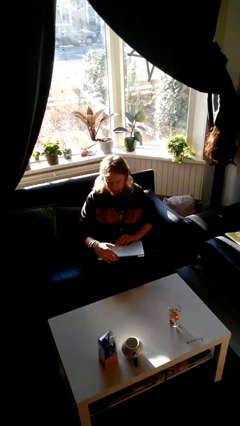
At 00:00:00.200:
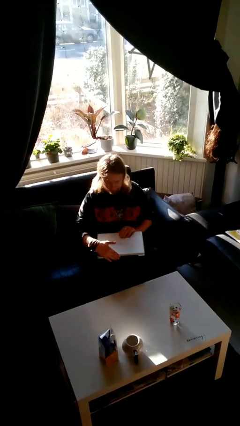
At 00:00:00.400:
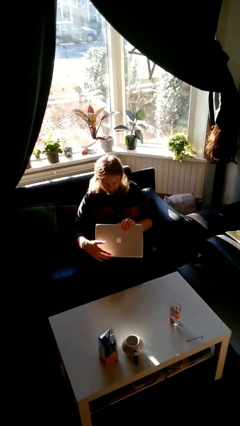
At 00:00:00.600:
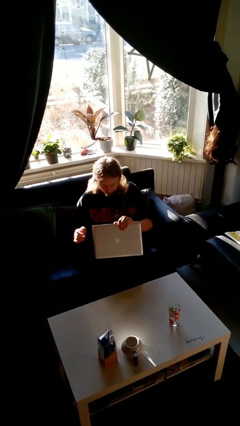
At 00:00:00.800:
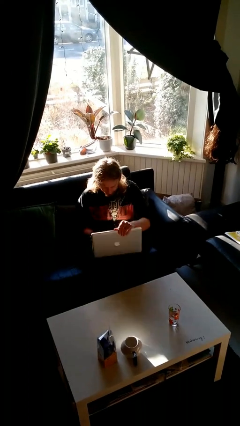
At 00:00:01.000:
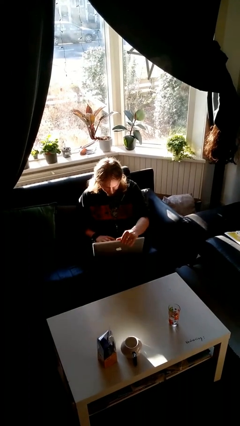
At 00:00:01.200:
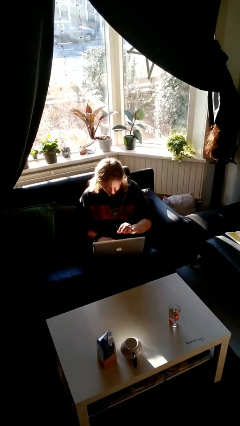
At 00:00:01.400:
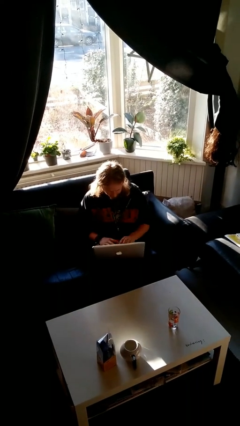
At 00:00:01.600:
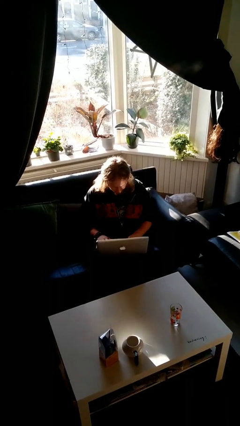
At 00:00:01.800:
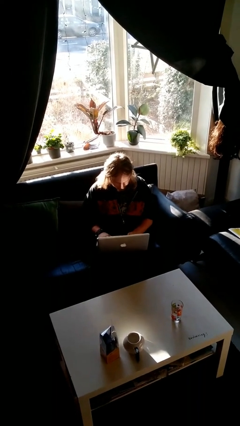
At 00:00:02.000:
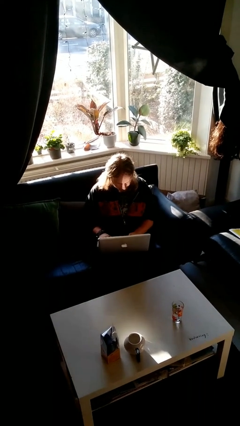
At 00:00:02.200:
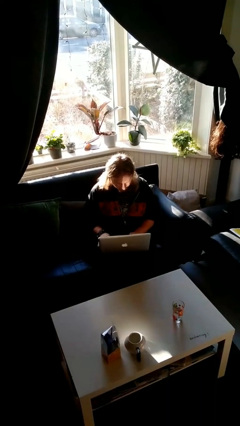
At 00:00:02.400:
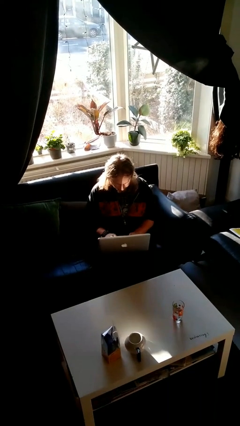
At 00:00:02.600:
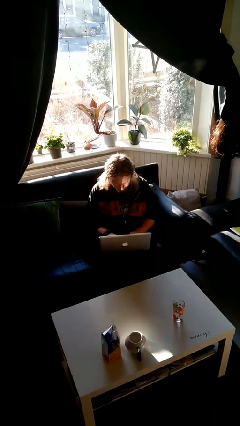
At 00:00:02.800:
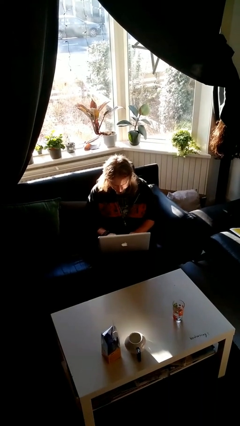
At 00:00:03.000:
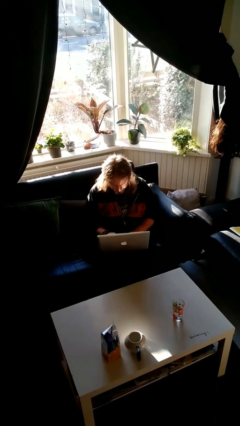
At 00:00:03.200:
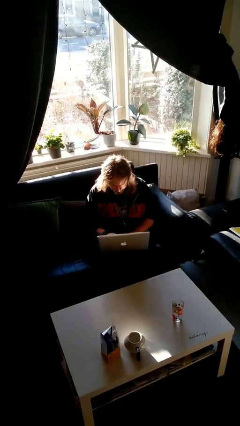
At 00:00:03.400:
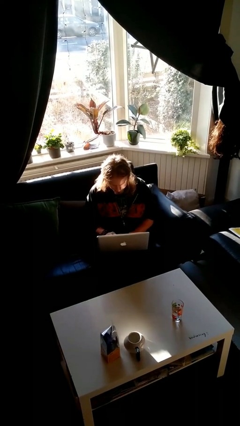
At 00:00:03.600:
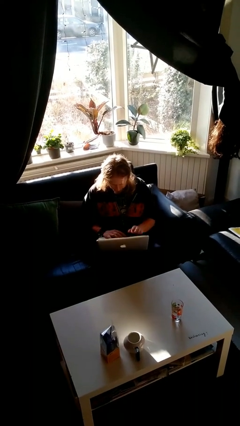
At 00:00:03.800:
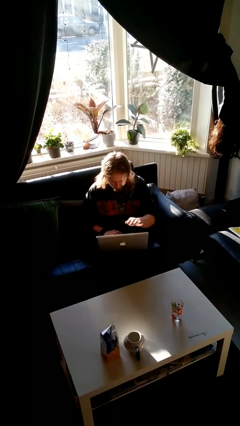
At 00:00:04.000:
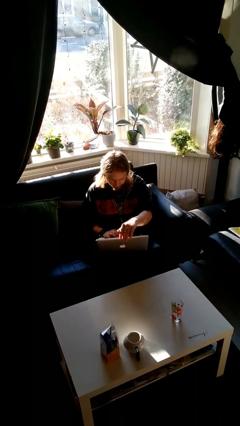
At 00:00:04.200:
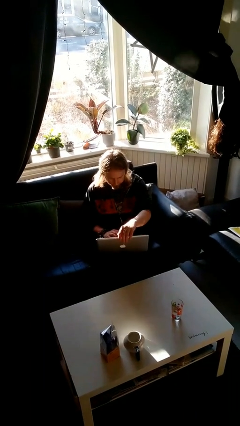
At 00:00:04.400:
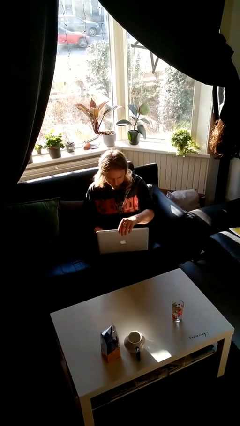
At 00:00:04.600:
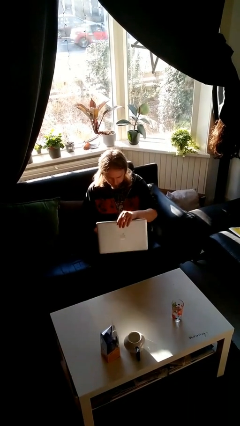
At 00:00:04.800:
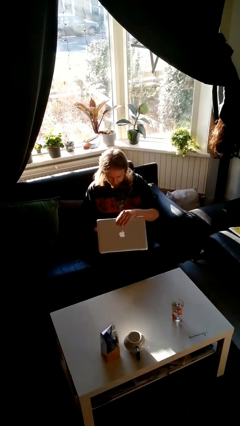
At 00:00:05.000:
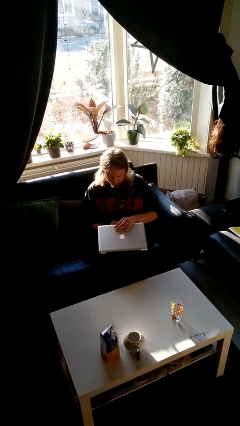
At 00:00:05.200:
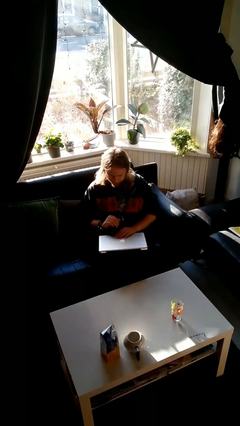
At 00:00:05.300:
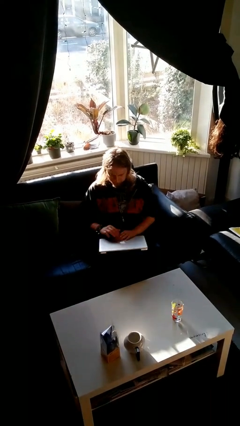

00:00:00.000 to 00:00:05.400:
person interacts with laptop

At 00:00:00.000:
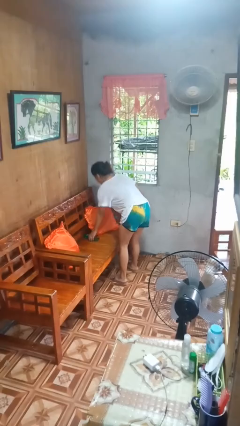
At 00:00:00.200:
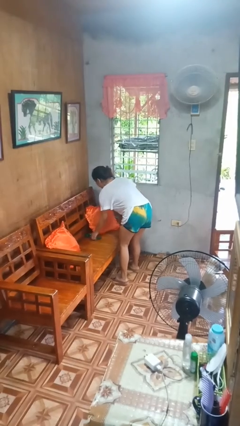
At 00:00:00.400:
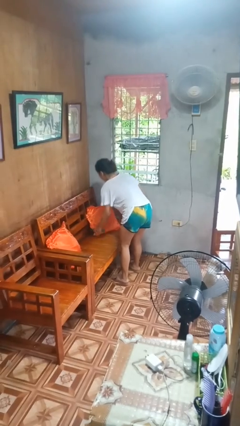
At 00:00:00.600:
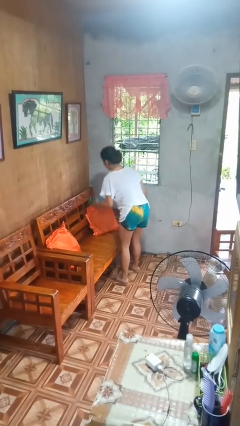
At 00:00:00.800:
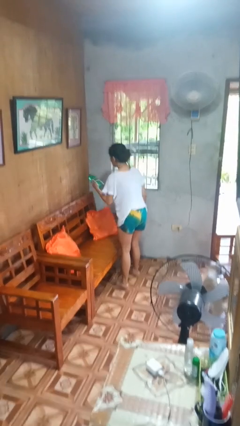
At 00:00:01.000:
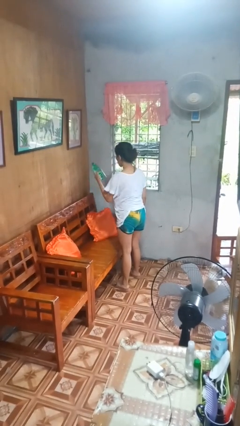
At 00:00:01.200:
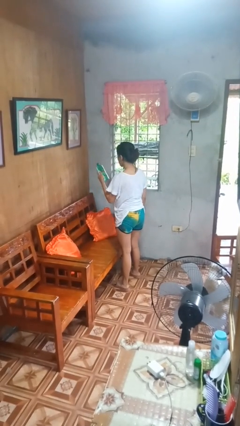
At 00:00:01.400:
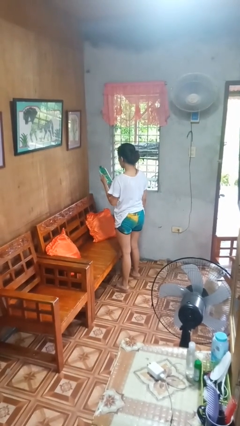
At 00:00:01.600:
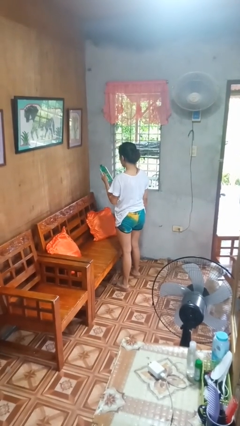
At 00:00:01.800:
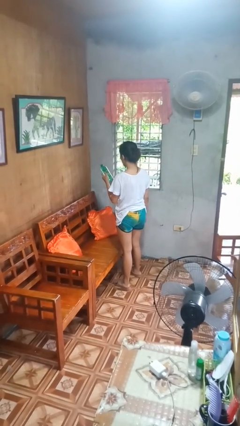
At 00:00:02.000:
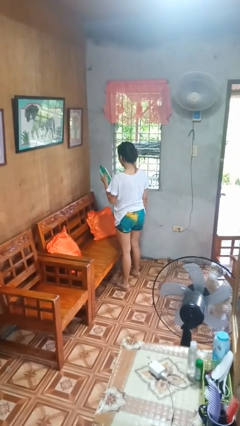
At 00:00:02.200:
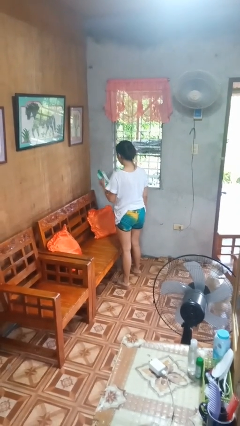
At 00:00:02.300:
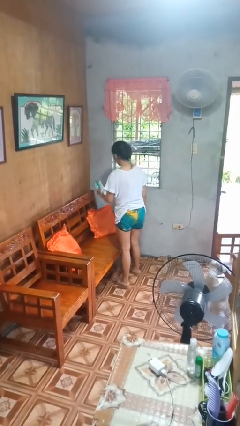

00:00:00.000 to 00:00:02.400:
person picks up object from couch

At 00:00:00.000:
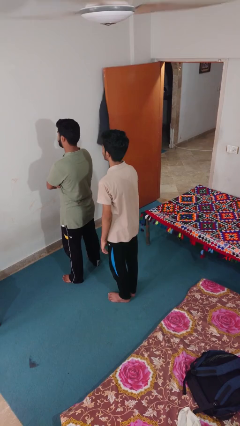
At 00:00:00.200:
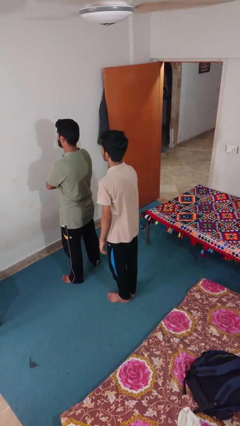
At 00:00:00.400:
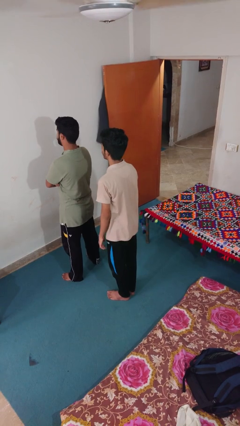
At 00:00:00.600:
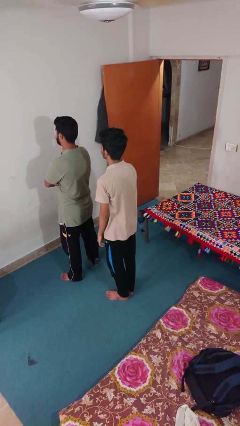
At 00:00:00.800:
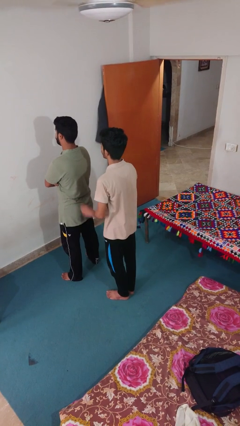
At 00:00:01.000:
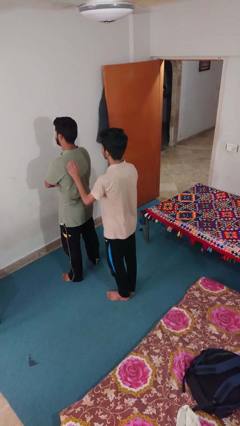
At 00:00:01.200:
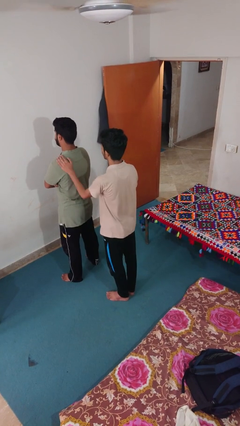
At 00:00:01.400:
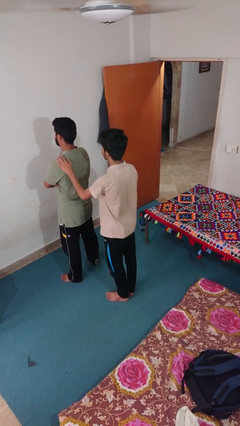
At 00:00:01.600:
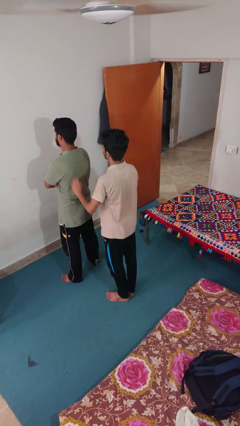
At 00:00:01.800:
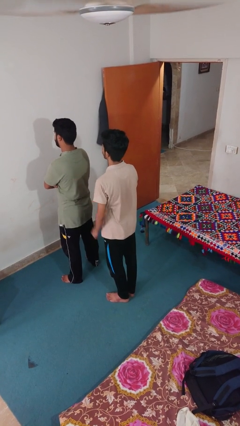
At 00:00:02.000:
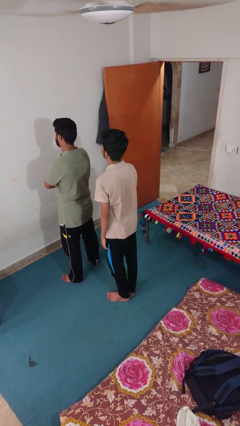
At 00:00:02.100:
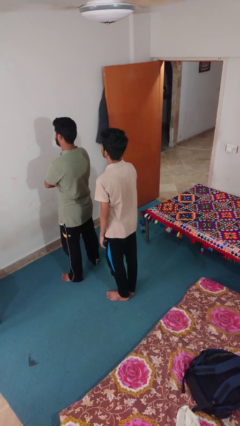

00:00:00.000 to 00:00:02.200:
person touches back of person

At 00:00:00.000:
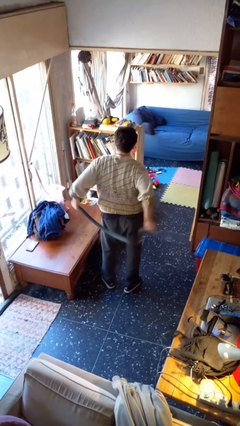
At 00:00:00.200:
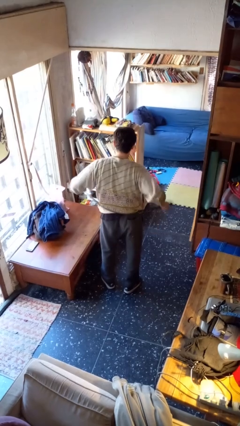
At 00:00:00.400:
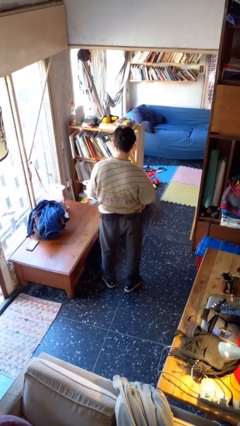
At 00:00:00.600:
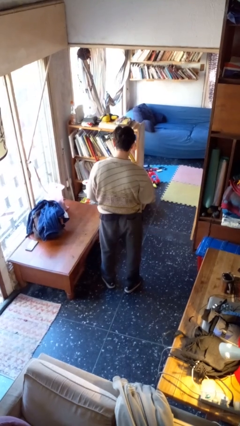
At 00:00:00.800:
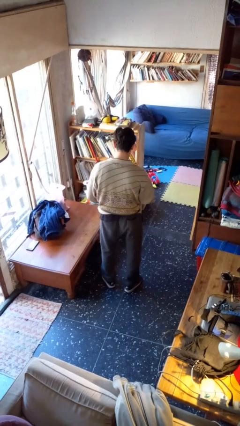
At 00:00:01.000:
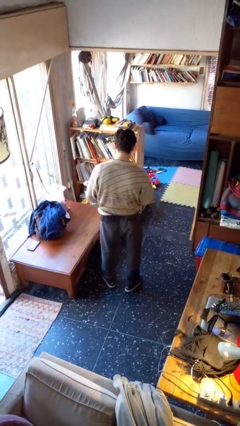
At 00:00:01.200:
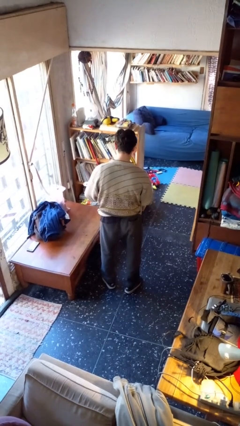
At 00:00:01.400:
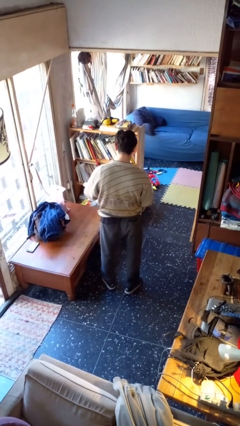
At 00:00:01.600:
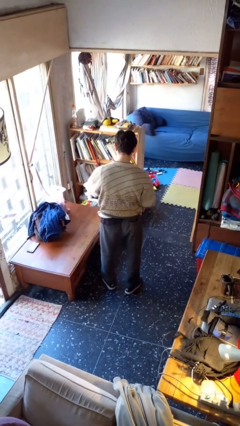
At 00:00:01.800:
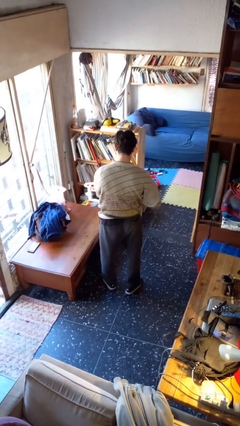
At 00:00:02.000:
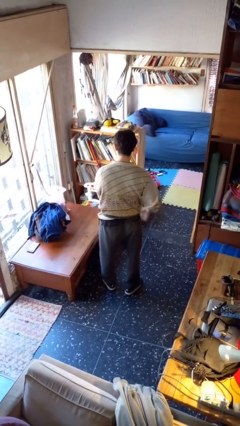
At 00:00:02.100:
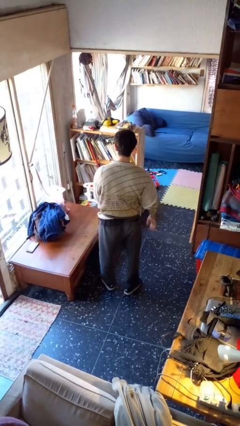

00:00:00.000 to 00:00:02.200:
person puts on belt

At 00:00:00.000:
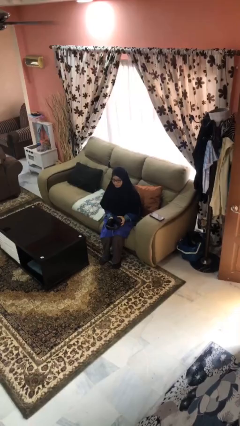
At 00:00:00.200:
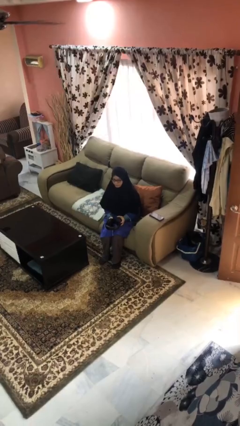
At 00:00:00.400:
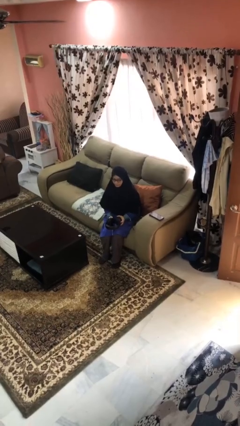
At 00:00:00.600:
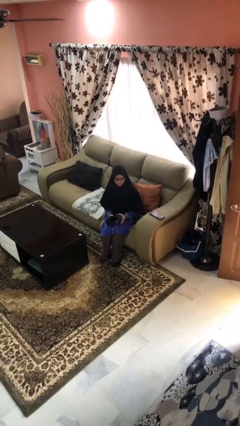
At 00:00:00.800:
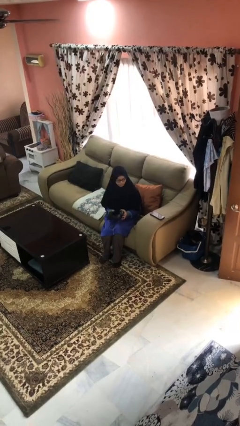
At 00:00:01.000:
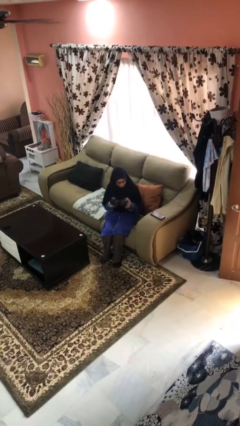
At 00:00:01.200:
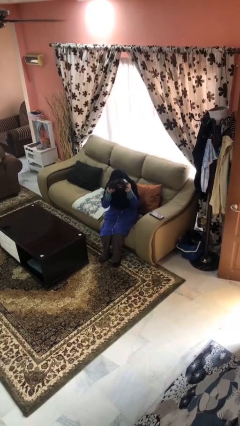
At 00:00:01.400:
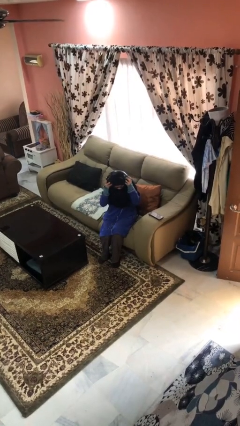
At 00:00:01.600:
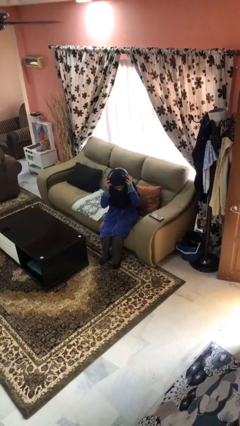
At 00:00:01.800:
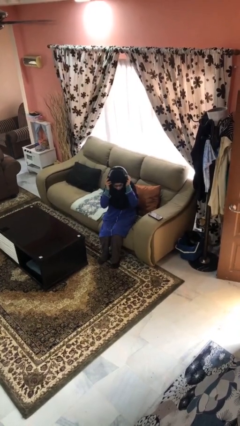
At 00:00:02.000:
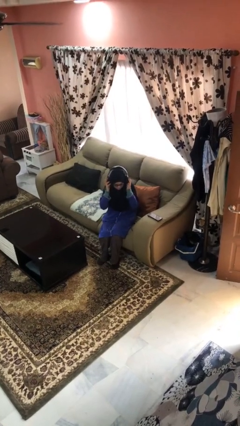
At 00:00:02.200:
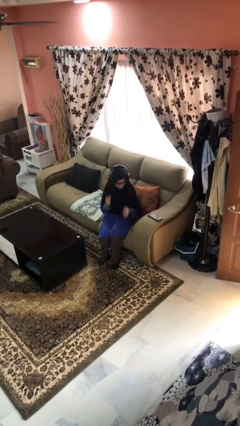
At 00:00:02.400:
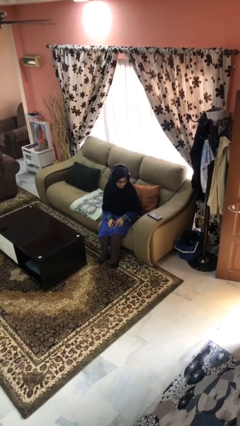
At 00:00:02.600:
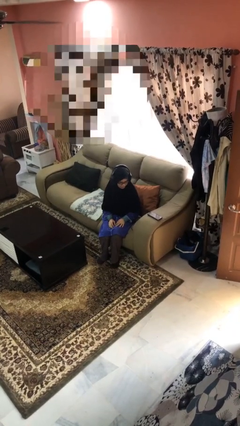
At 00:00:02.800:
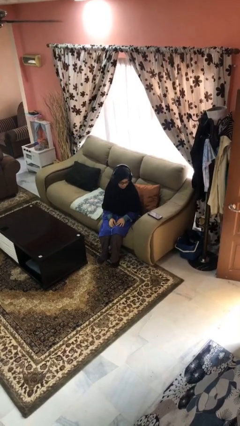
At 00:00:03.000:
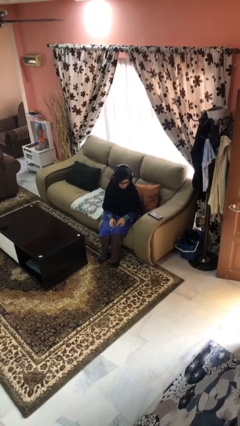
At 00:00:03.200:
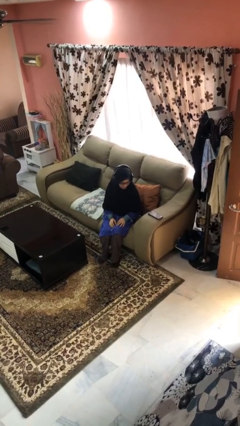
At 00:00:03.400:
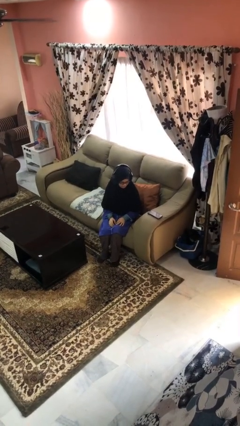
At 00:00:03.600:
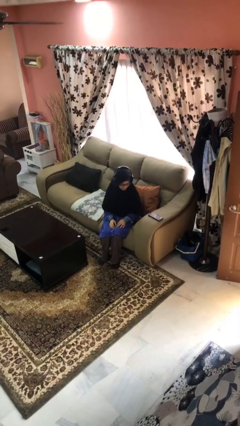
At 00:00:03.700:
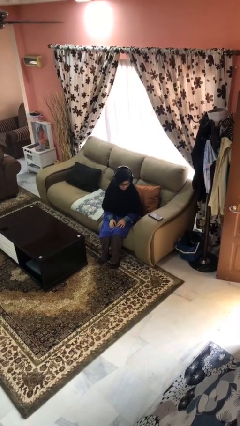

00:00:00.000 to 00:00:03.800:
person puts on headphones

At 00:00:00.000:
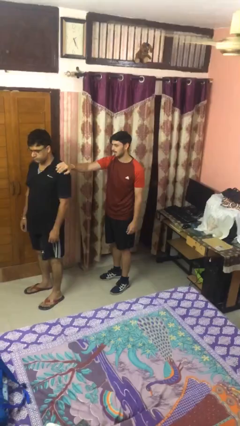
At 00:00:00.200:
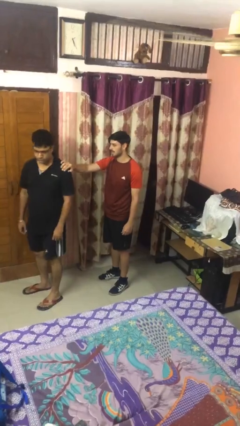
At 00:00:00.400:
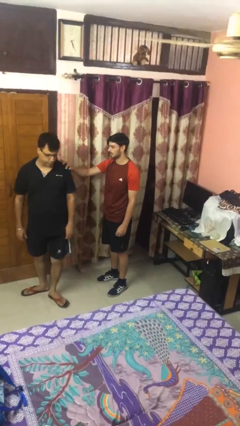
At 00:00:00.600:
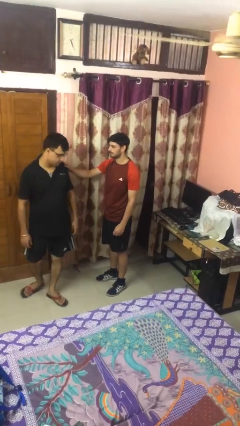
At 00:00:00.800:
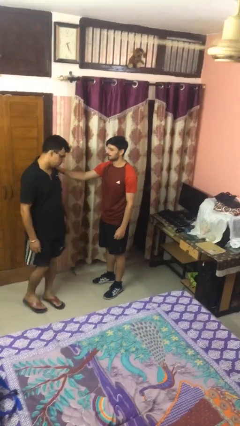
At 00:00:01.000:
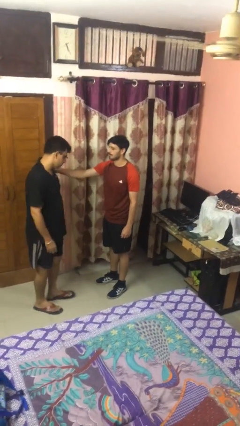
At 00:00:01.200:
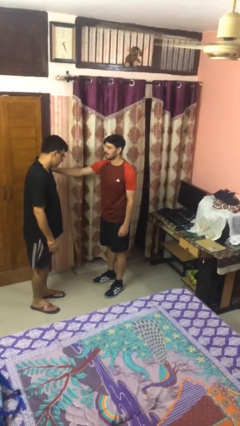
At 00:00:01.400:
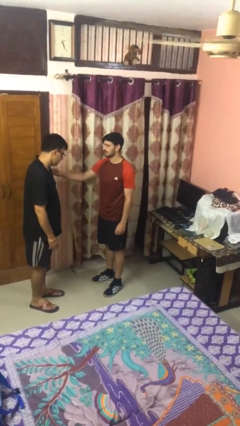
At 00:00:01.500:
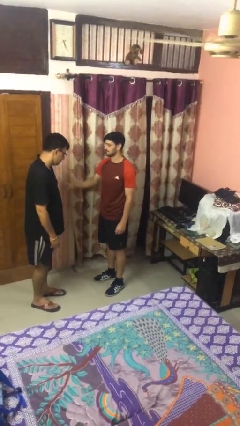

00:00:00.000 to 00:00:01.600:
person spins person around
